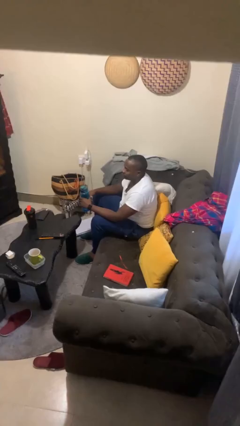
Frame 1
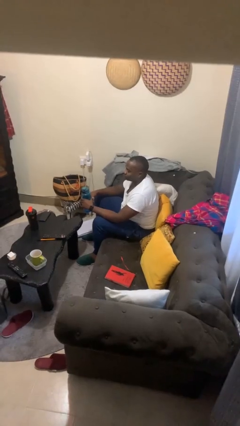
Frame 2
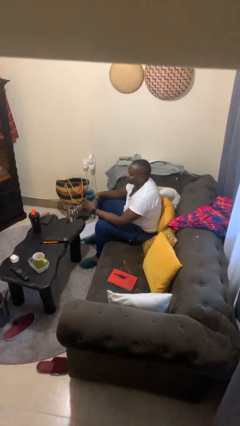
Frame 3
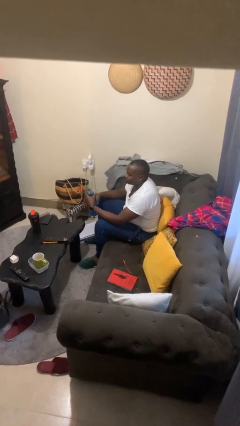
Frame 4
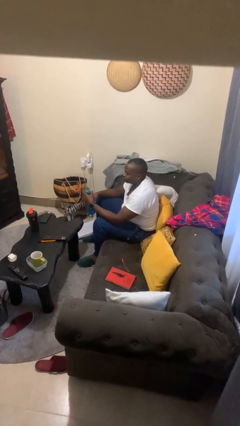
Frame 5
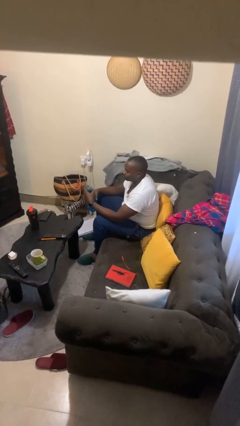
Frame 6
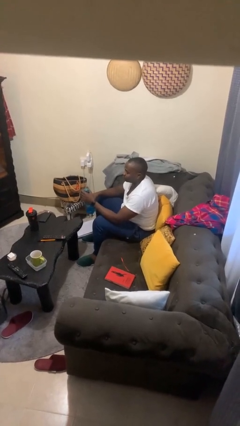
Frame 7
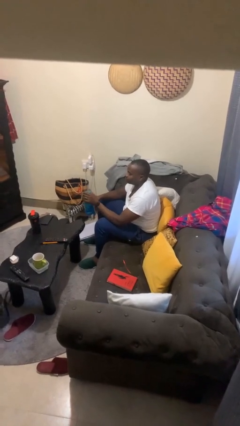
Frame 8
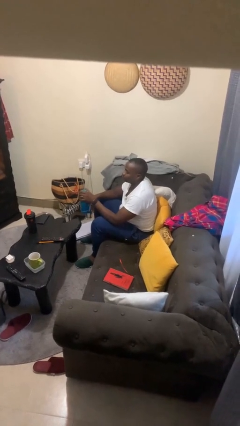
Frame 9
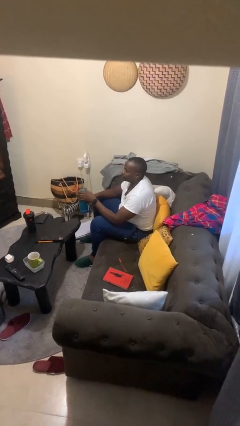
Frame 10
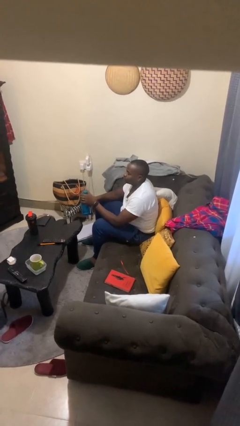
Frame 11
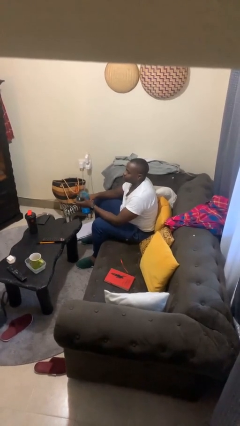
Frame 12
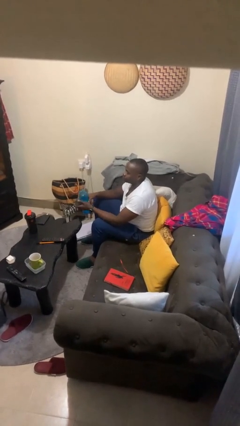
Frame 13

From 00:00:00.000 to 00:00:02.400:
person unscrews lid from bottle

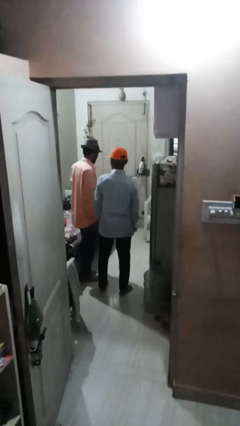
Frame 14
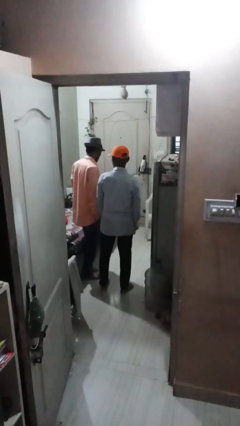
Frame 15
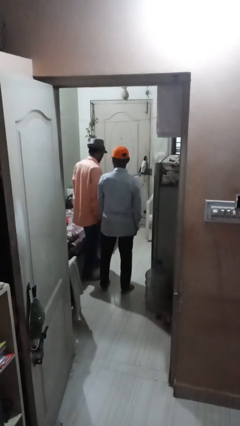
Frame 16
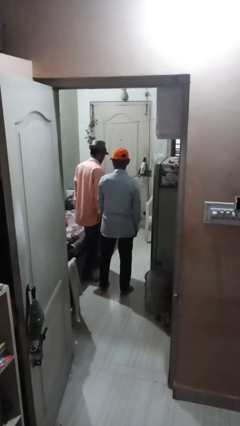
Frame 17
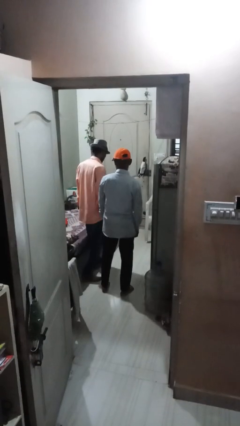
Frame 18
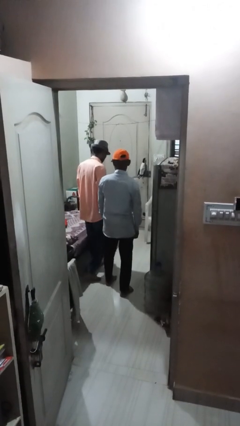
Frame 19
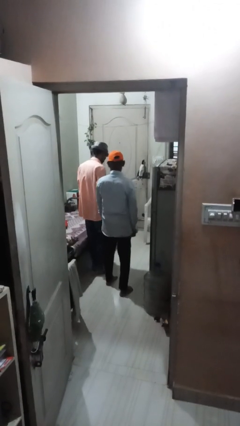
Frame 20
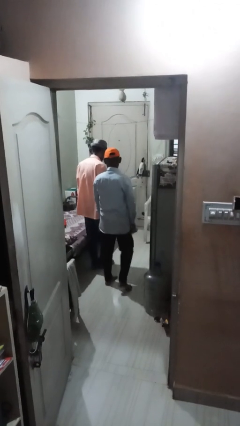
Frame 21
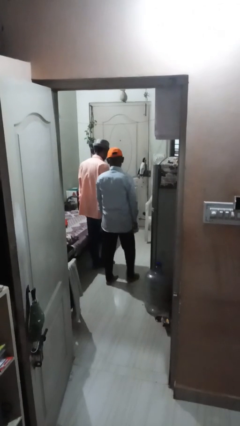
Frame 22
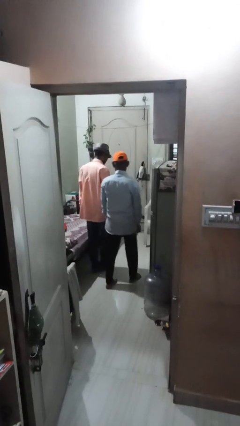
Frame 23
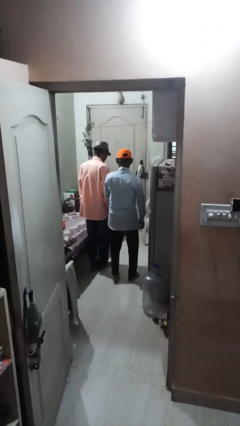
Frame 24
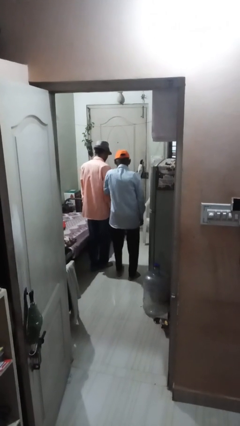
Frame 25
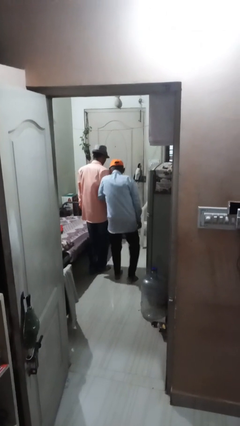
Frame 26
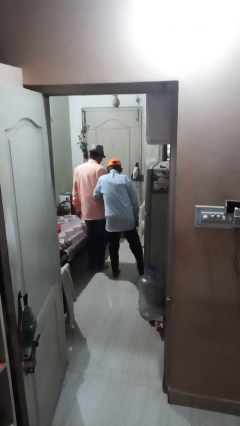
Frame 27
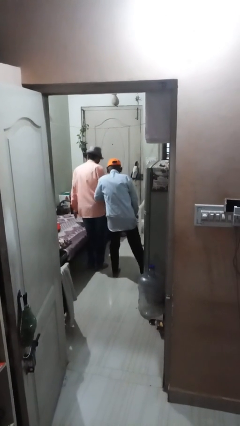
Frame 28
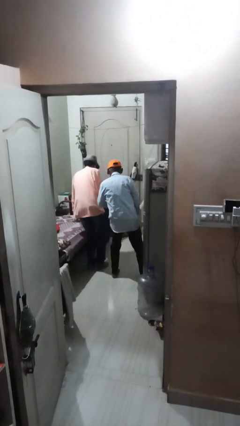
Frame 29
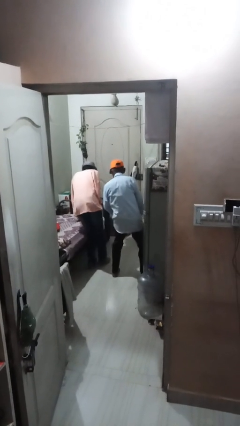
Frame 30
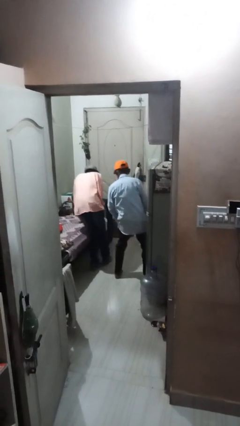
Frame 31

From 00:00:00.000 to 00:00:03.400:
person bumps into person

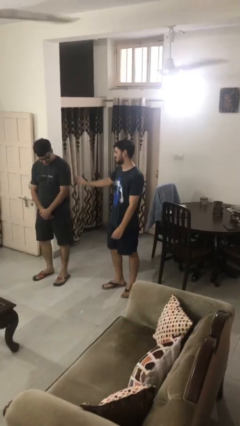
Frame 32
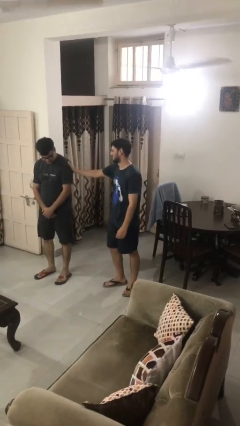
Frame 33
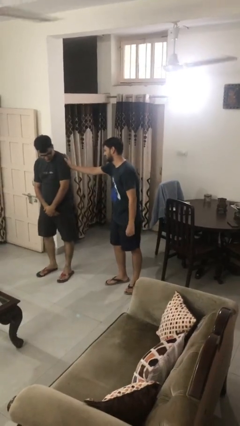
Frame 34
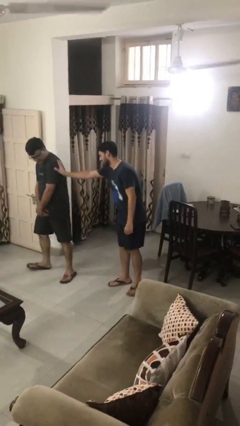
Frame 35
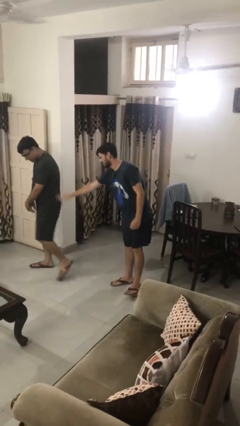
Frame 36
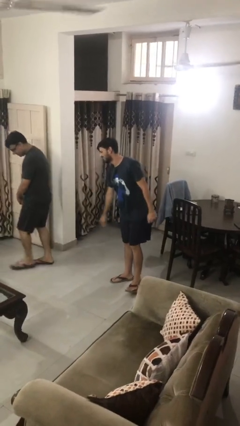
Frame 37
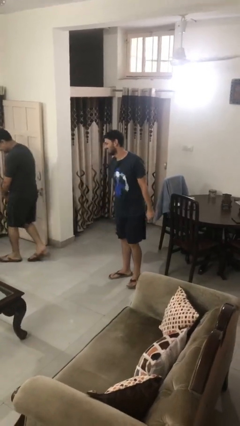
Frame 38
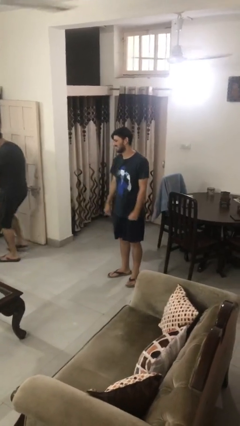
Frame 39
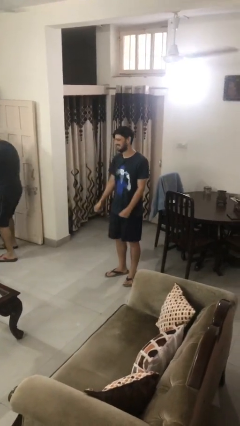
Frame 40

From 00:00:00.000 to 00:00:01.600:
person shoves person

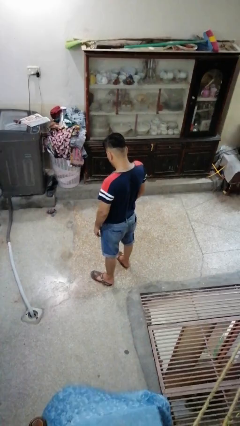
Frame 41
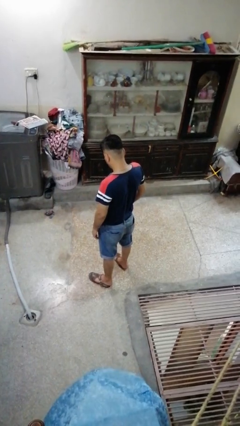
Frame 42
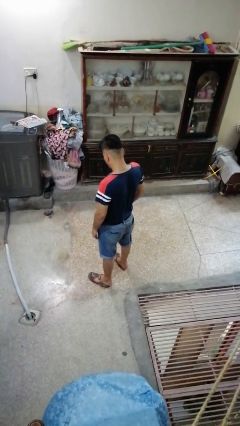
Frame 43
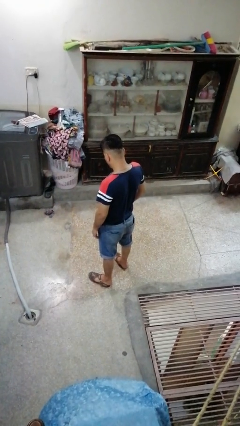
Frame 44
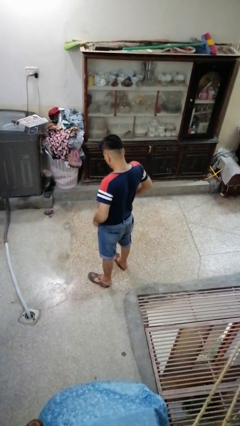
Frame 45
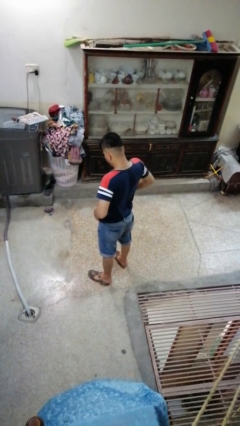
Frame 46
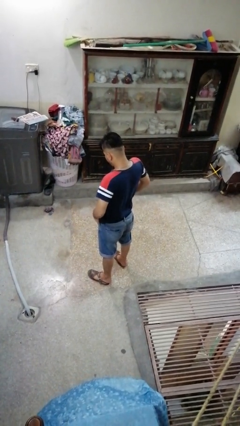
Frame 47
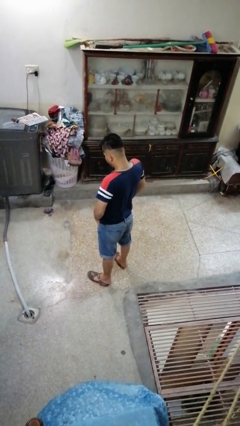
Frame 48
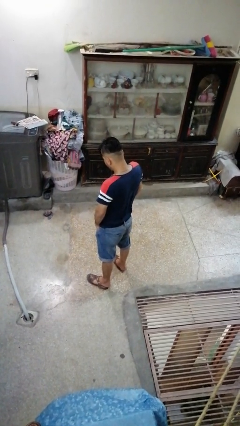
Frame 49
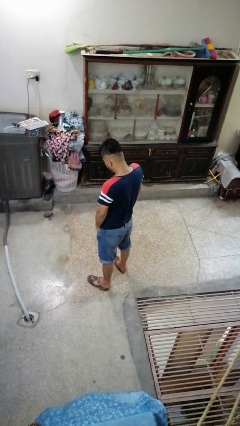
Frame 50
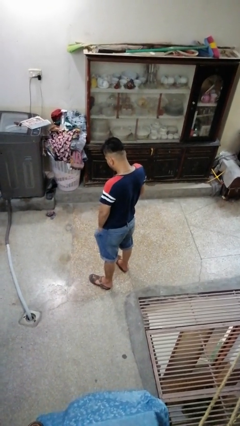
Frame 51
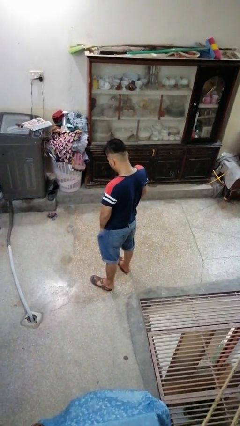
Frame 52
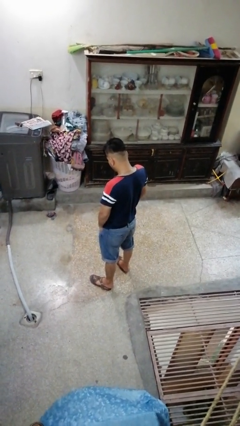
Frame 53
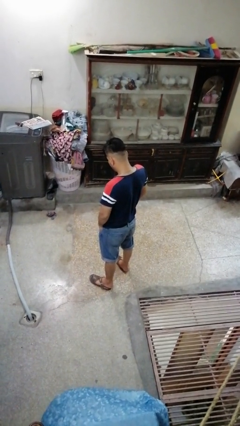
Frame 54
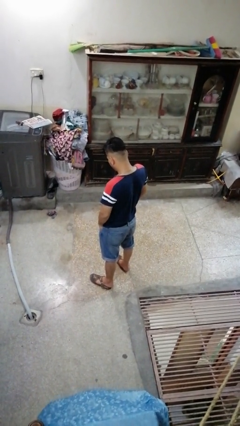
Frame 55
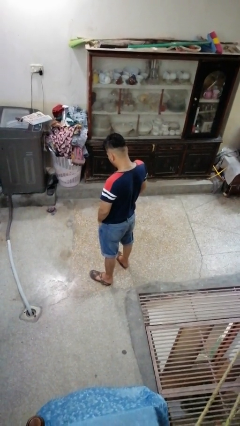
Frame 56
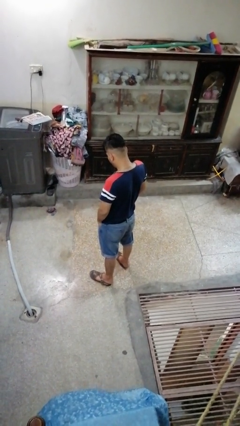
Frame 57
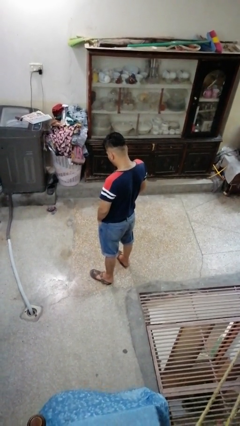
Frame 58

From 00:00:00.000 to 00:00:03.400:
person puts hands in back pockets

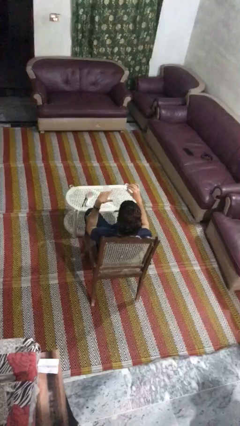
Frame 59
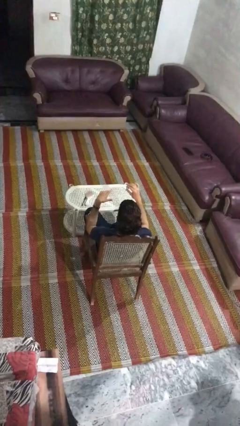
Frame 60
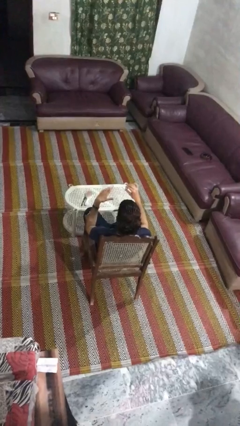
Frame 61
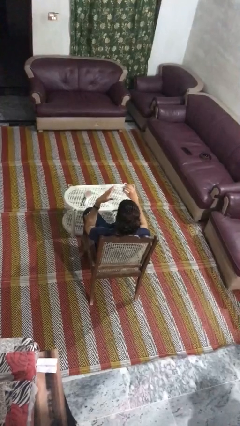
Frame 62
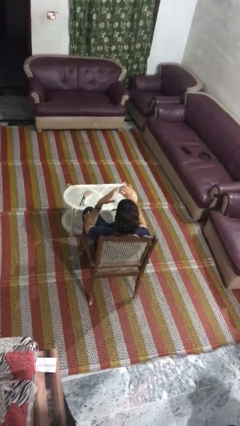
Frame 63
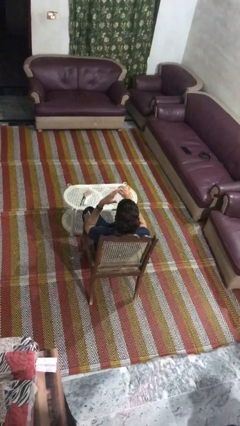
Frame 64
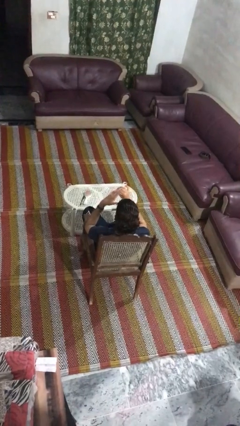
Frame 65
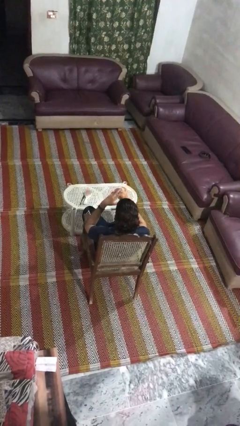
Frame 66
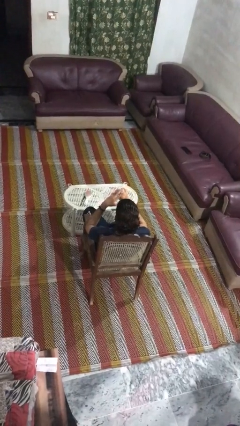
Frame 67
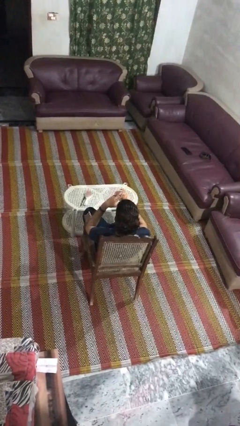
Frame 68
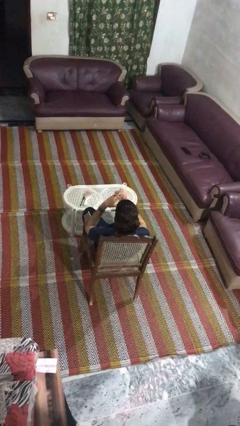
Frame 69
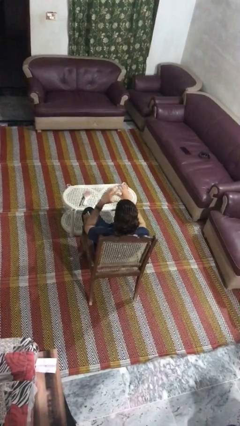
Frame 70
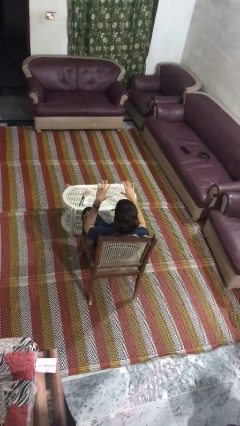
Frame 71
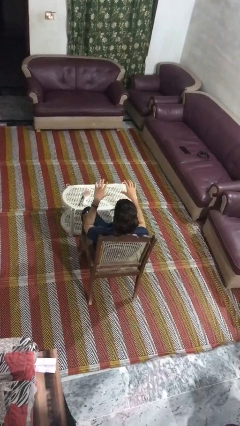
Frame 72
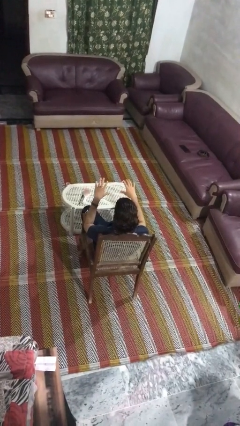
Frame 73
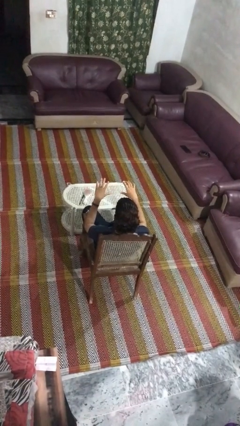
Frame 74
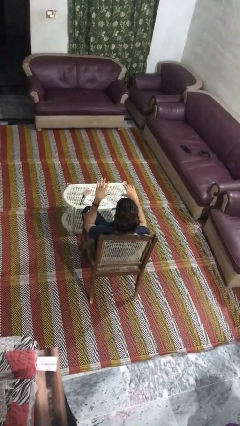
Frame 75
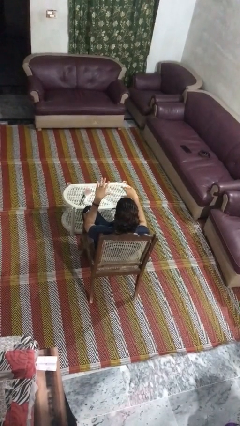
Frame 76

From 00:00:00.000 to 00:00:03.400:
person puts on ring

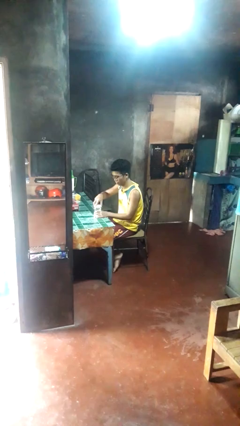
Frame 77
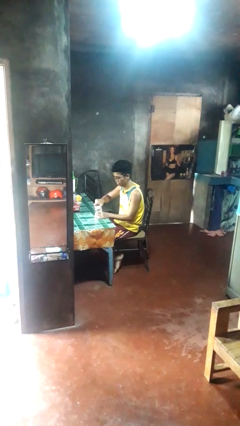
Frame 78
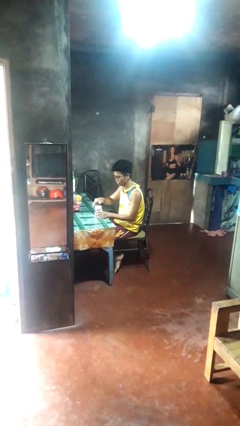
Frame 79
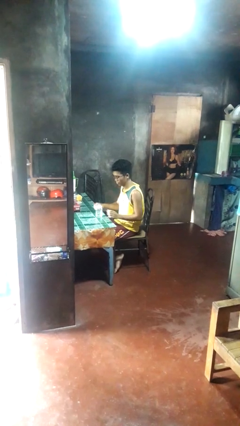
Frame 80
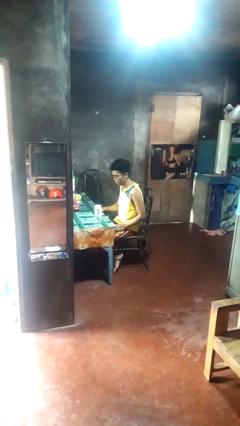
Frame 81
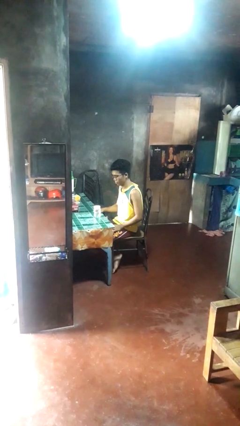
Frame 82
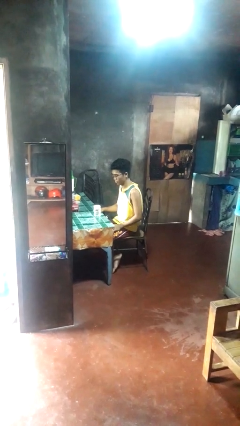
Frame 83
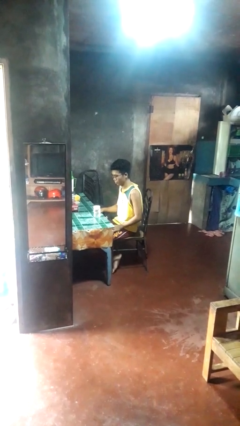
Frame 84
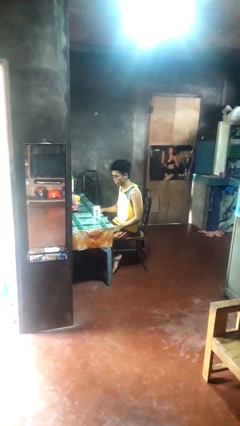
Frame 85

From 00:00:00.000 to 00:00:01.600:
person closes jar

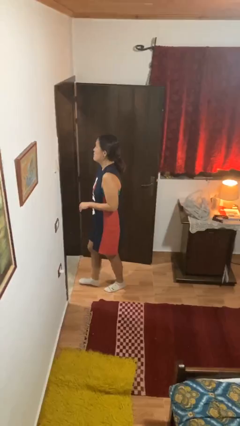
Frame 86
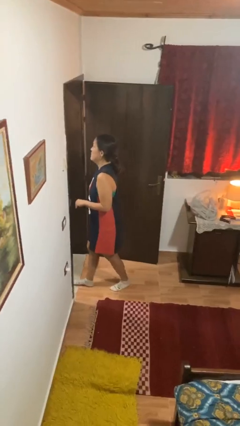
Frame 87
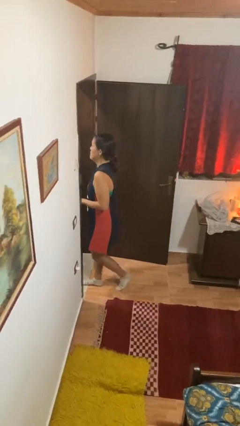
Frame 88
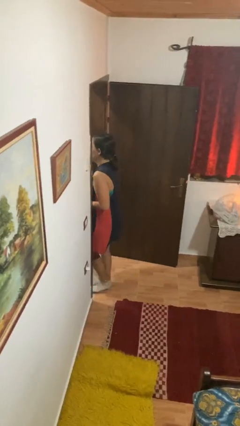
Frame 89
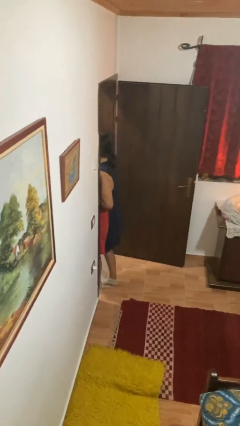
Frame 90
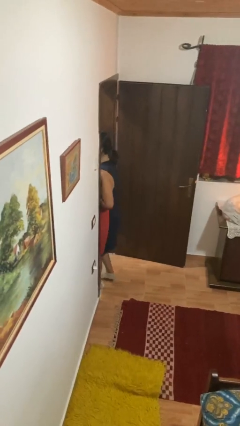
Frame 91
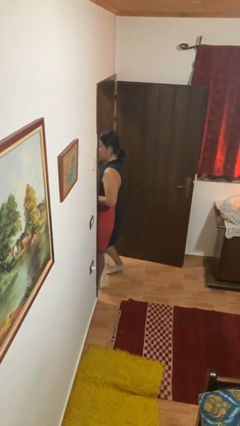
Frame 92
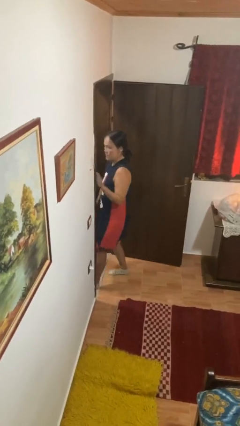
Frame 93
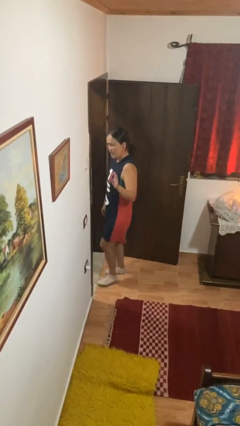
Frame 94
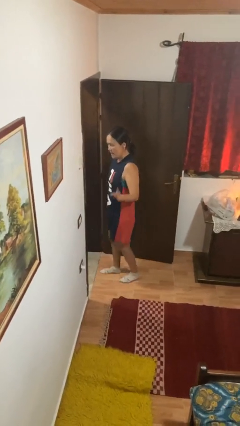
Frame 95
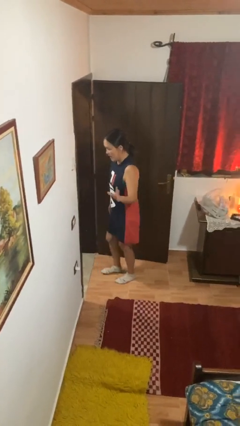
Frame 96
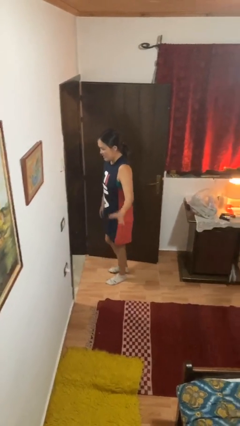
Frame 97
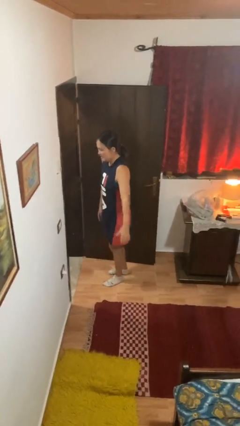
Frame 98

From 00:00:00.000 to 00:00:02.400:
person bumps into wall
